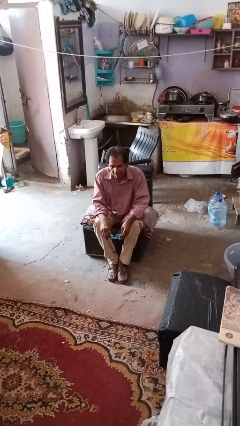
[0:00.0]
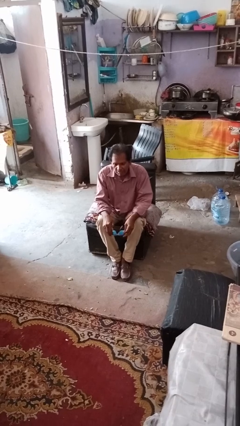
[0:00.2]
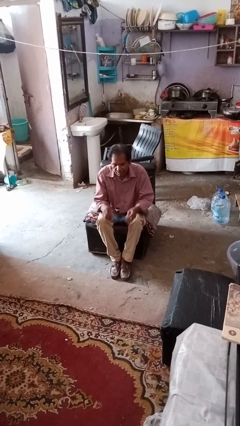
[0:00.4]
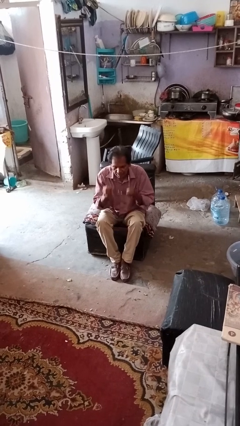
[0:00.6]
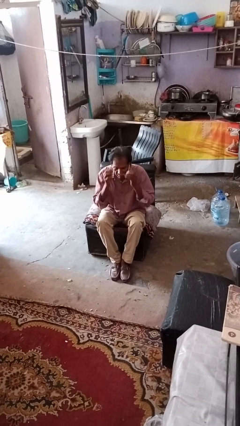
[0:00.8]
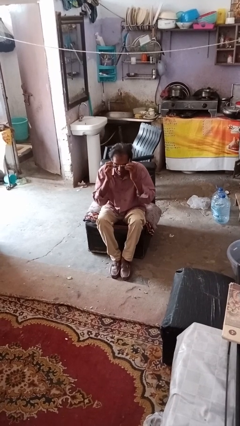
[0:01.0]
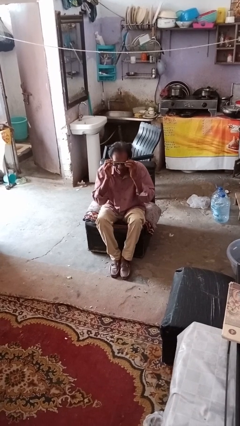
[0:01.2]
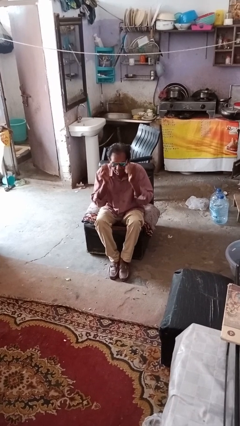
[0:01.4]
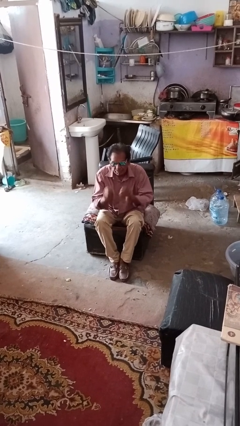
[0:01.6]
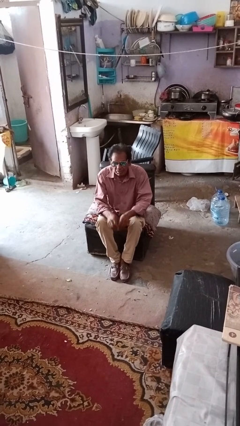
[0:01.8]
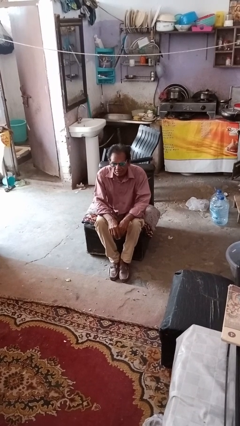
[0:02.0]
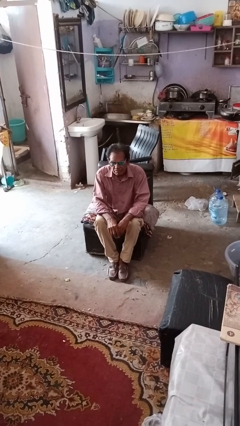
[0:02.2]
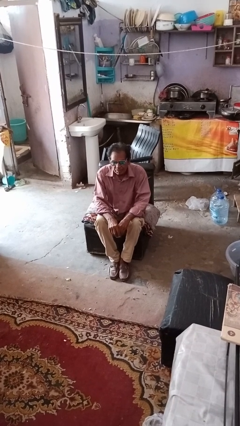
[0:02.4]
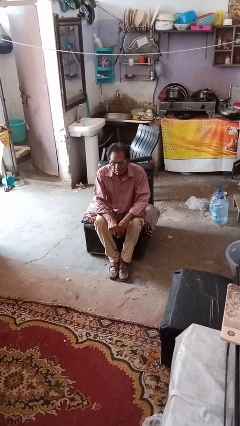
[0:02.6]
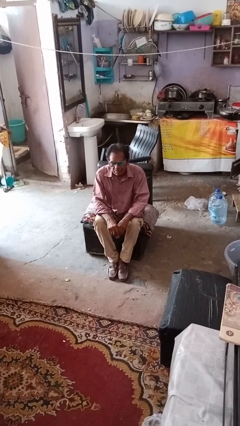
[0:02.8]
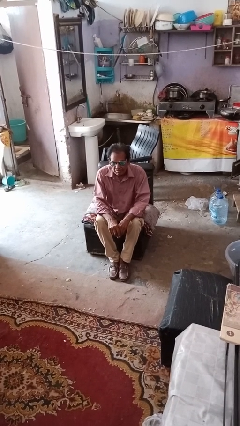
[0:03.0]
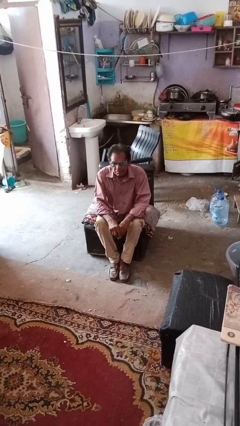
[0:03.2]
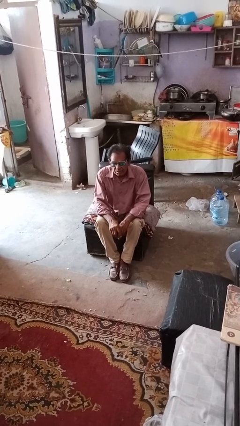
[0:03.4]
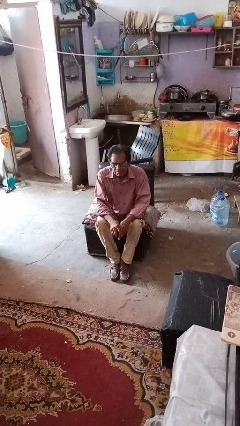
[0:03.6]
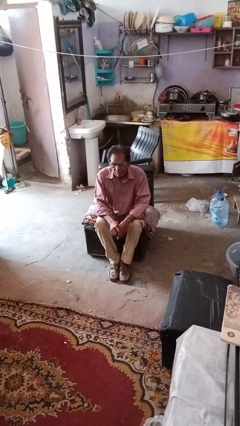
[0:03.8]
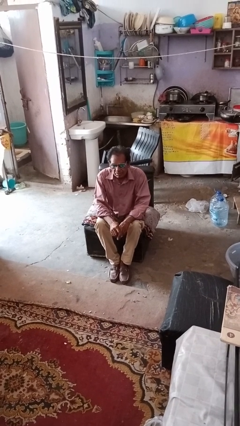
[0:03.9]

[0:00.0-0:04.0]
person puts on sunglasses

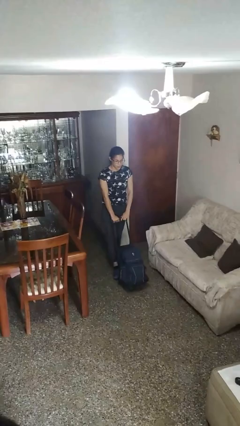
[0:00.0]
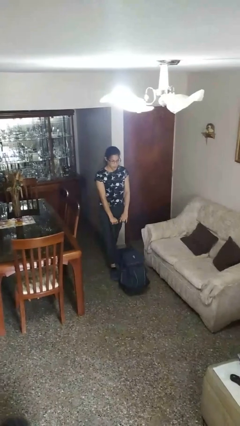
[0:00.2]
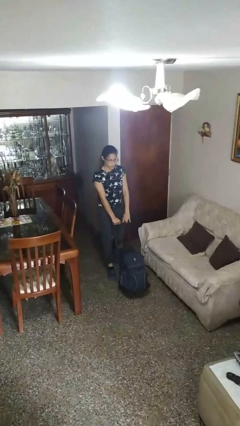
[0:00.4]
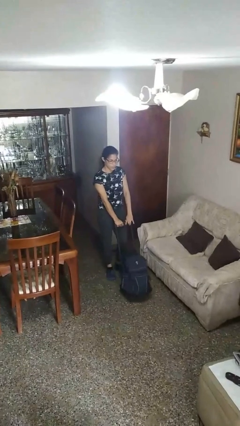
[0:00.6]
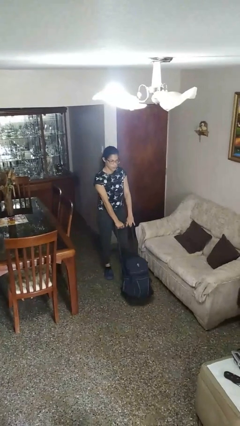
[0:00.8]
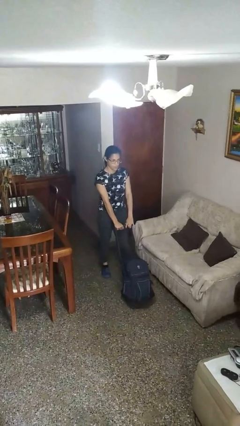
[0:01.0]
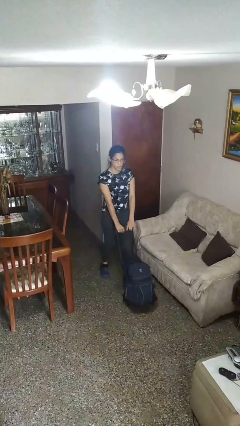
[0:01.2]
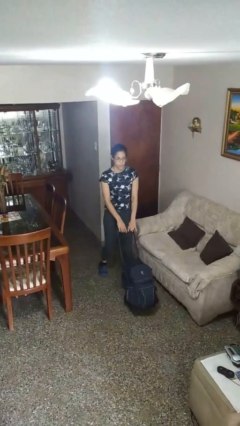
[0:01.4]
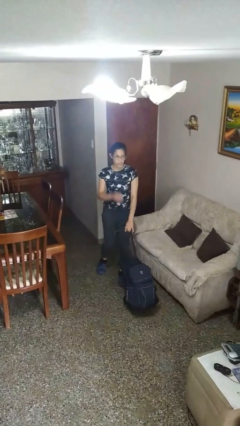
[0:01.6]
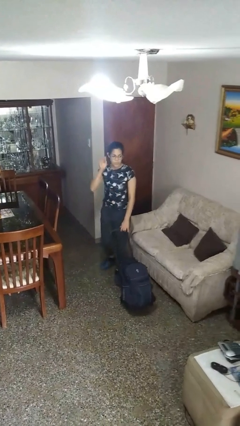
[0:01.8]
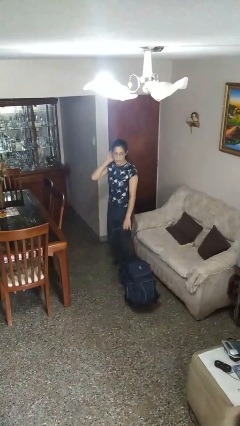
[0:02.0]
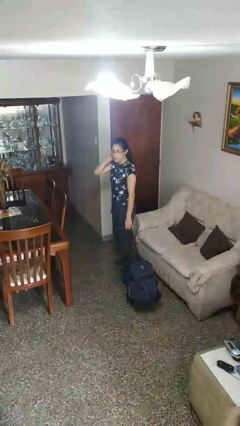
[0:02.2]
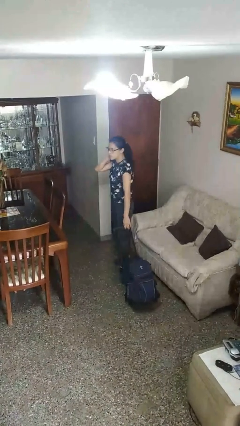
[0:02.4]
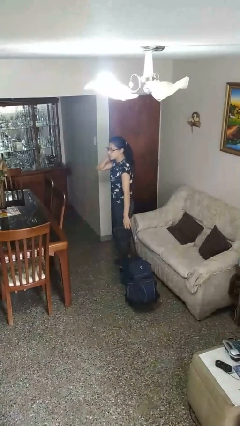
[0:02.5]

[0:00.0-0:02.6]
person pushes wheeled cart

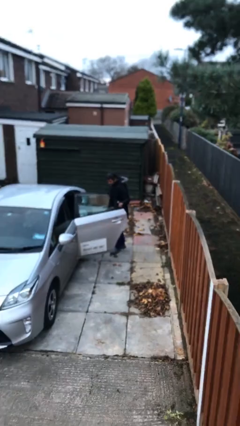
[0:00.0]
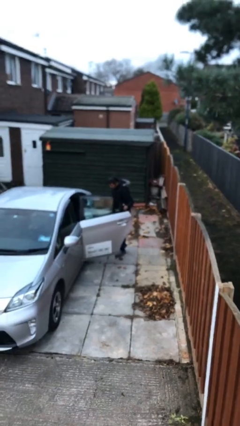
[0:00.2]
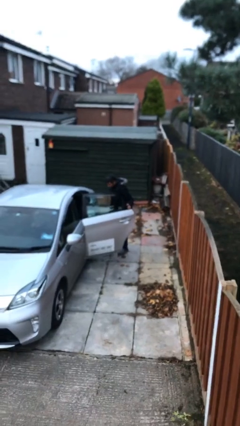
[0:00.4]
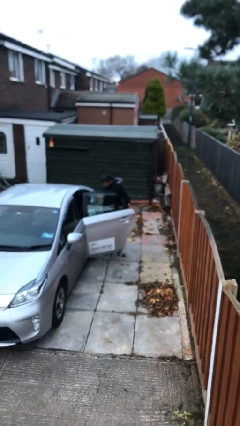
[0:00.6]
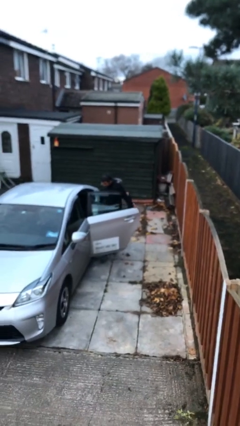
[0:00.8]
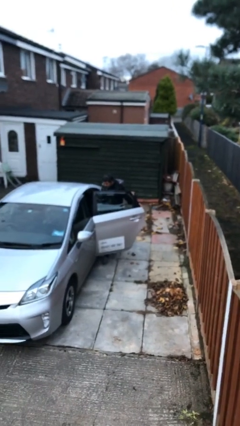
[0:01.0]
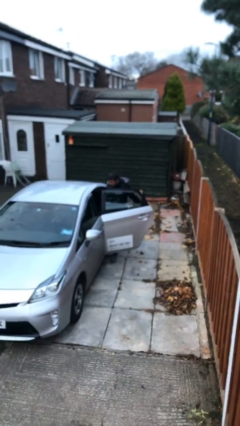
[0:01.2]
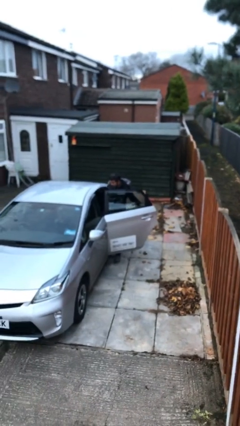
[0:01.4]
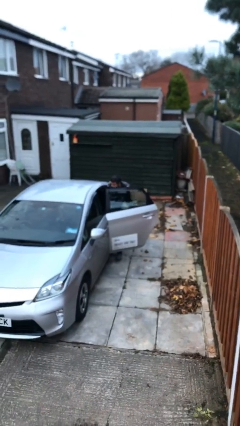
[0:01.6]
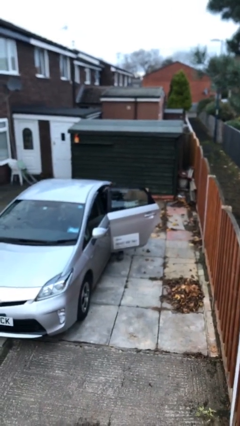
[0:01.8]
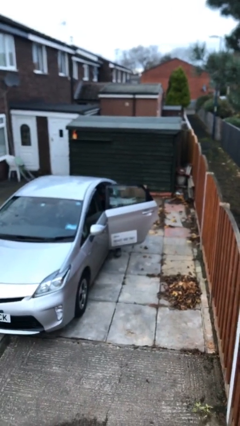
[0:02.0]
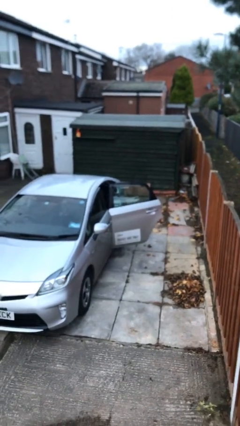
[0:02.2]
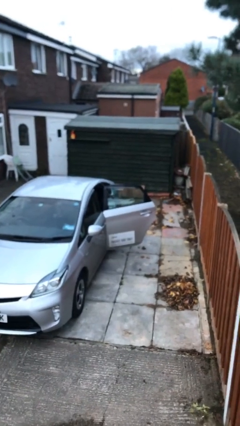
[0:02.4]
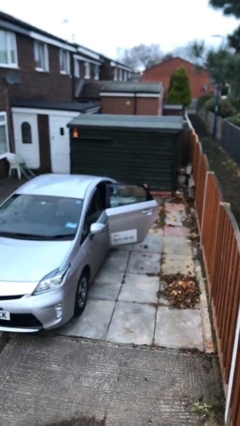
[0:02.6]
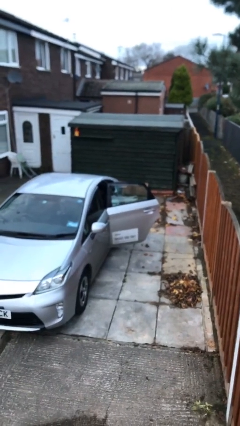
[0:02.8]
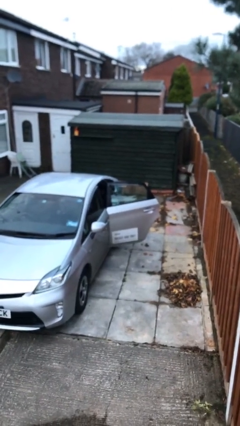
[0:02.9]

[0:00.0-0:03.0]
person enters car

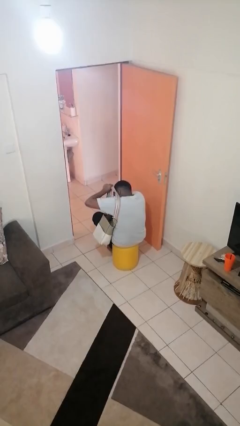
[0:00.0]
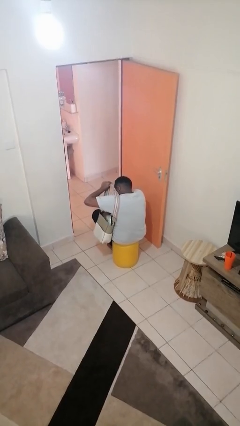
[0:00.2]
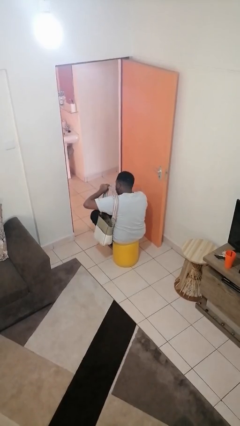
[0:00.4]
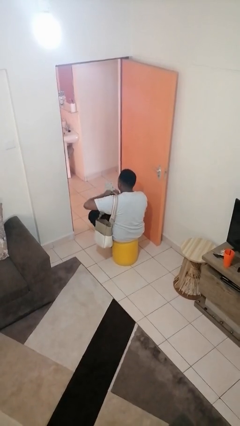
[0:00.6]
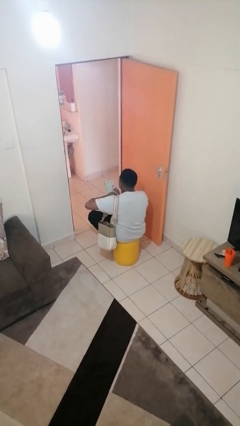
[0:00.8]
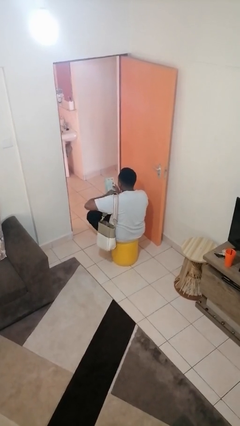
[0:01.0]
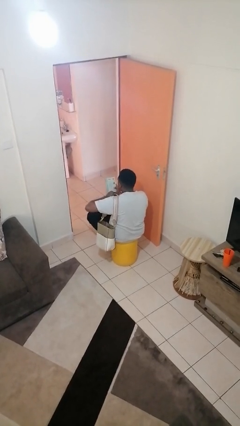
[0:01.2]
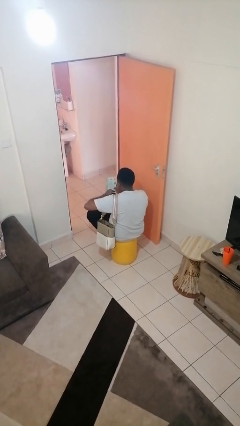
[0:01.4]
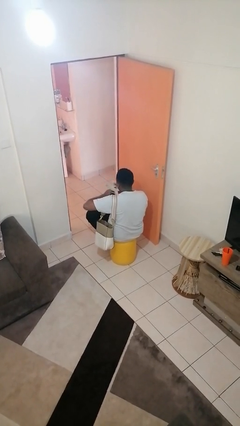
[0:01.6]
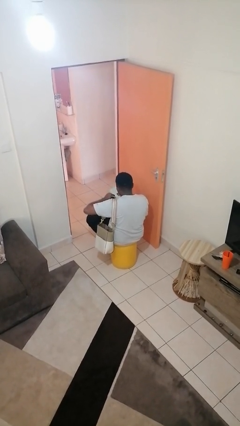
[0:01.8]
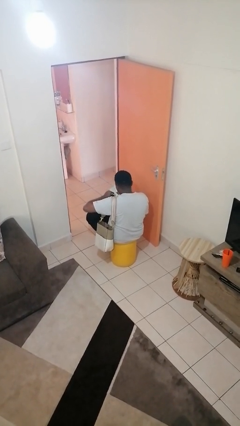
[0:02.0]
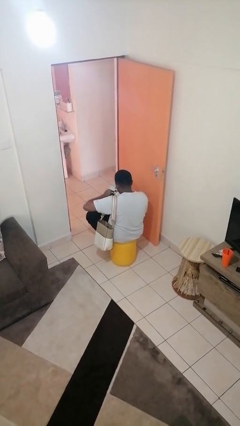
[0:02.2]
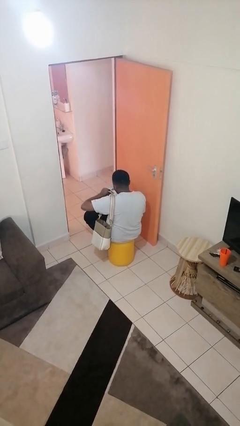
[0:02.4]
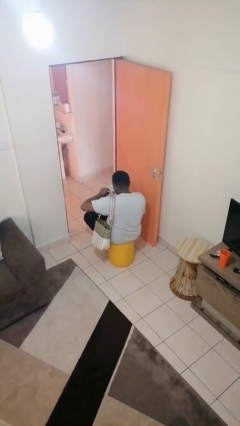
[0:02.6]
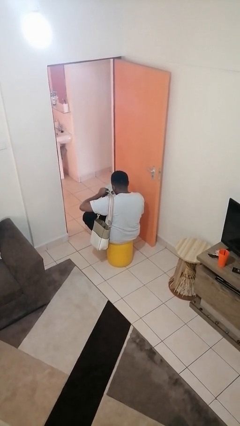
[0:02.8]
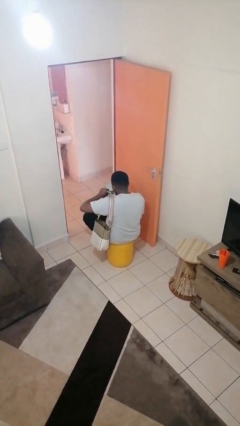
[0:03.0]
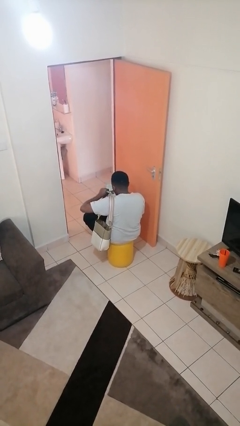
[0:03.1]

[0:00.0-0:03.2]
person takes object from purse

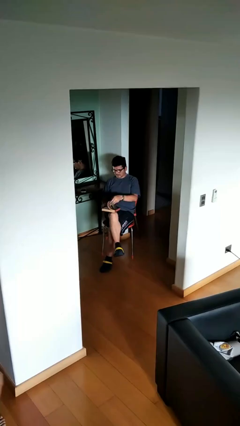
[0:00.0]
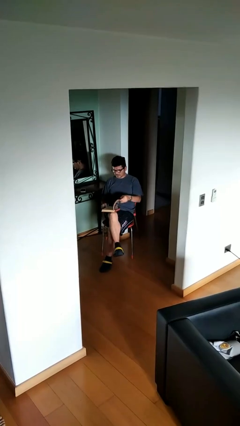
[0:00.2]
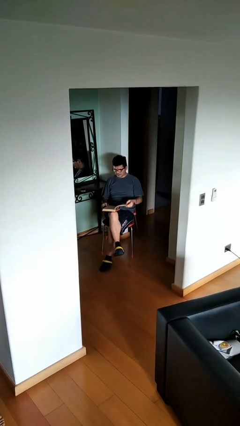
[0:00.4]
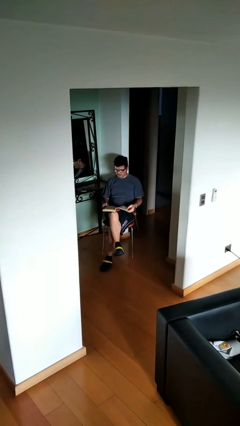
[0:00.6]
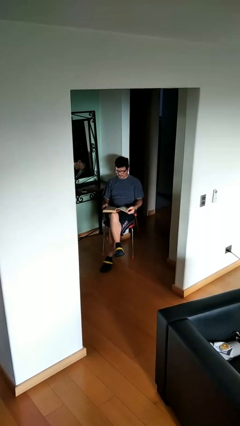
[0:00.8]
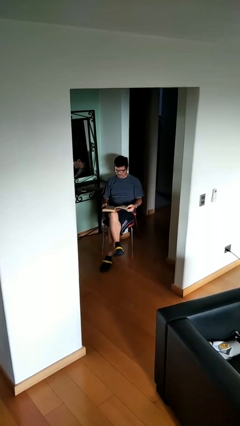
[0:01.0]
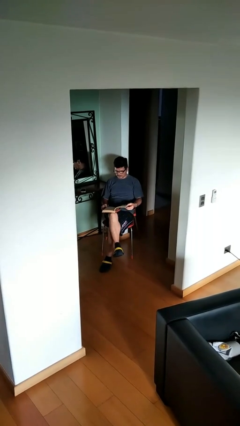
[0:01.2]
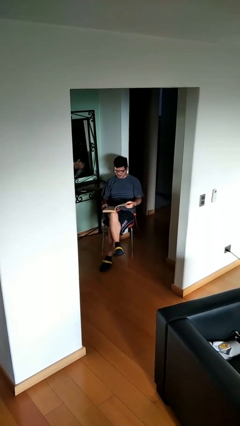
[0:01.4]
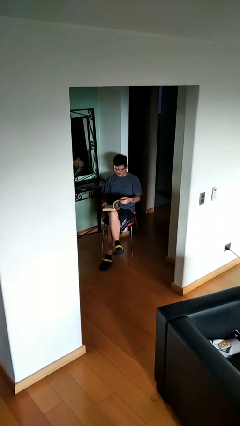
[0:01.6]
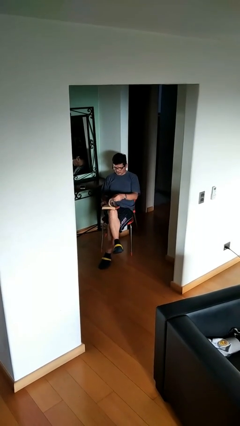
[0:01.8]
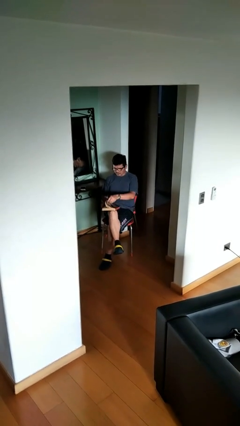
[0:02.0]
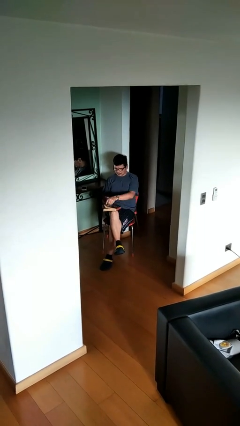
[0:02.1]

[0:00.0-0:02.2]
person reads document

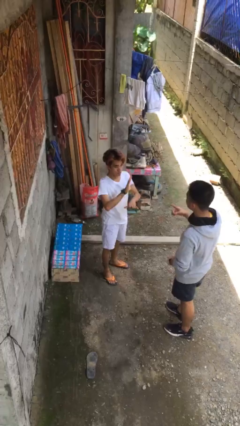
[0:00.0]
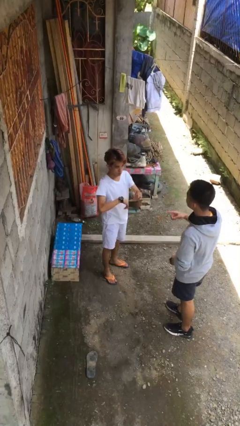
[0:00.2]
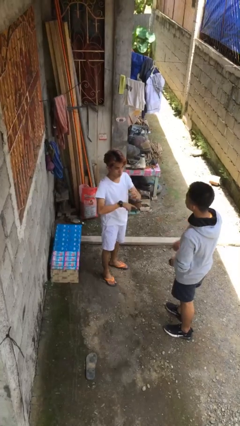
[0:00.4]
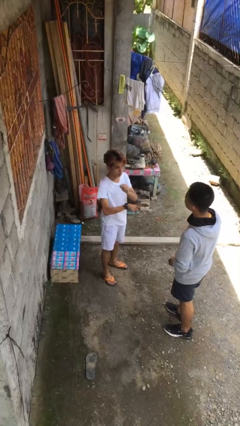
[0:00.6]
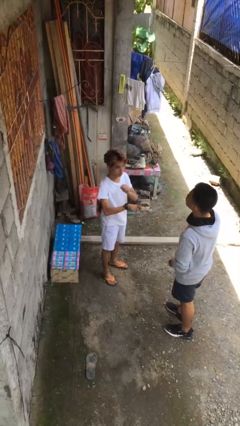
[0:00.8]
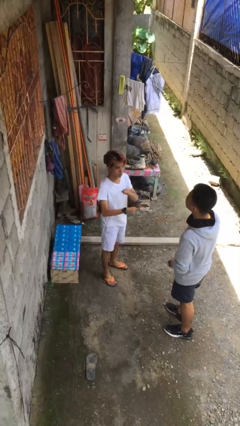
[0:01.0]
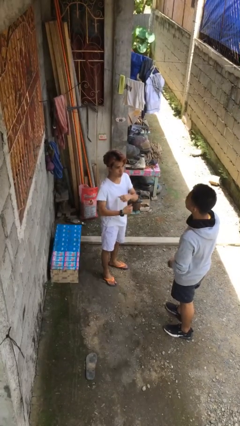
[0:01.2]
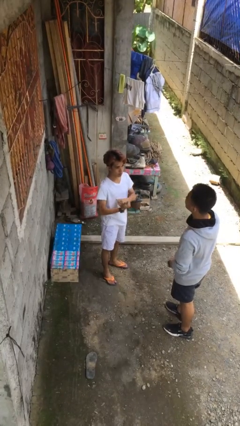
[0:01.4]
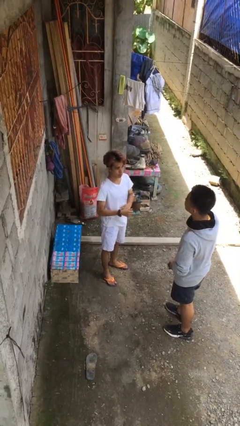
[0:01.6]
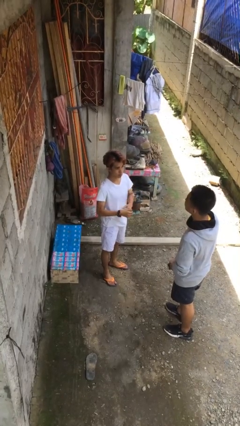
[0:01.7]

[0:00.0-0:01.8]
person talks to person

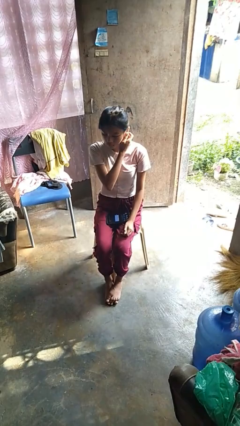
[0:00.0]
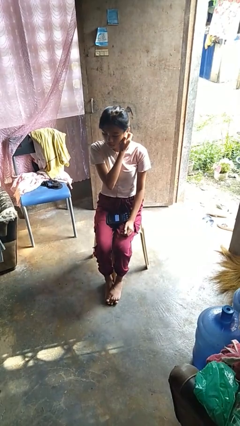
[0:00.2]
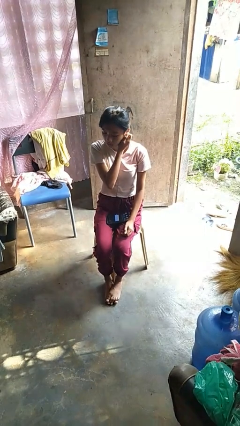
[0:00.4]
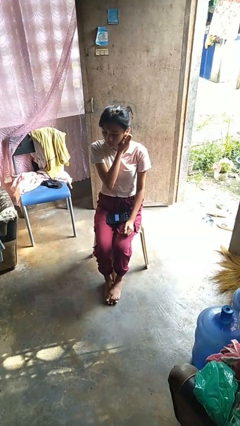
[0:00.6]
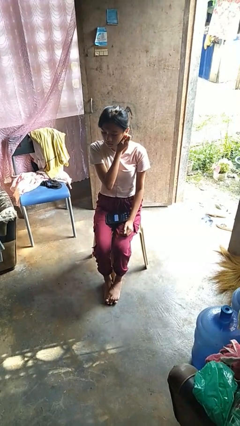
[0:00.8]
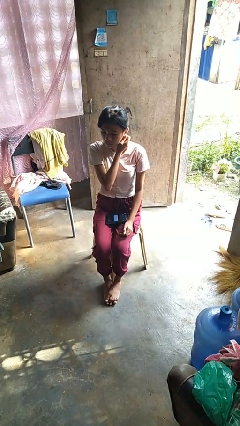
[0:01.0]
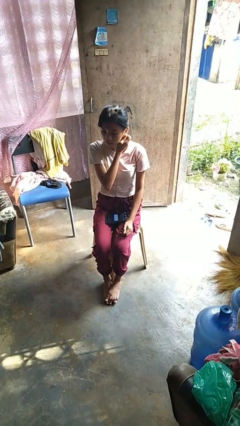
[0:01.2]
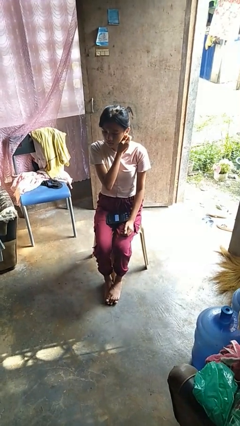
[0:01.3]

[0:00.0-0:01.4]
person touches earlobe
